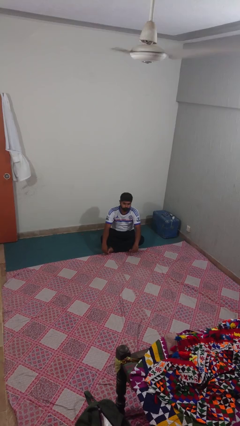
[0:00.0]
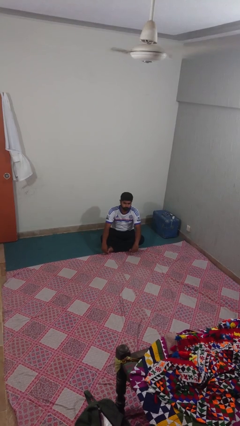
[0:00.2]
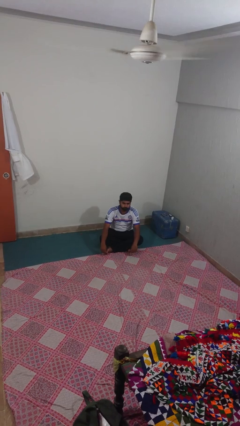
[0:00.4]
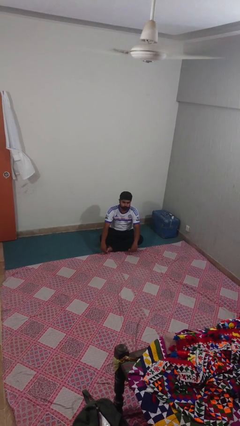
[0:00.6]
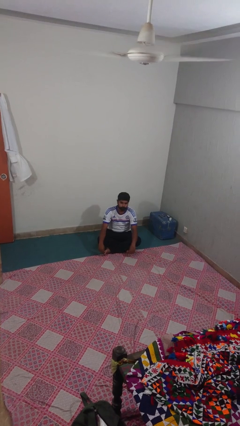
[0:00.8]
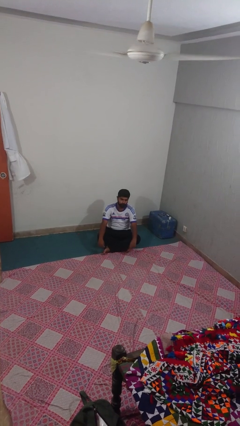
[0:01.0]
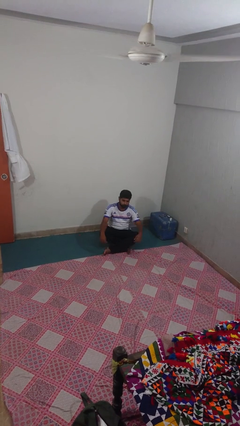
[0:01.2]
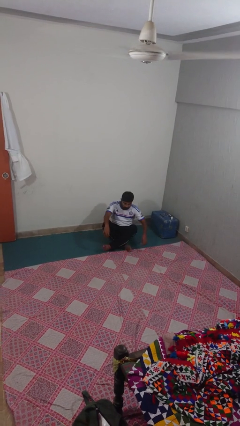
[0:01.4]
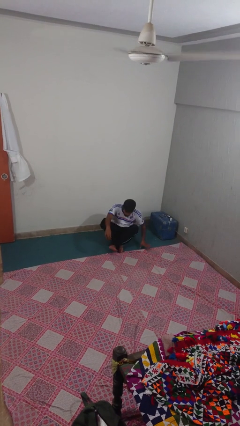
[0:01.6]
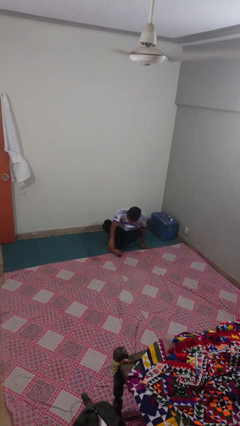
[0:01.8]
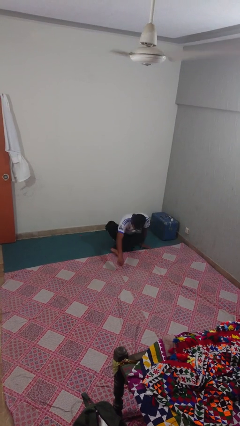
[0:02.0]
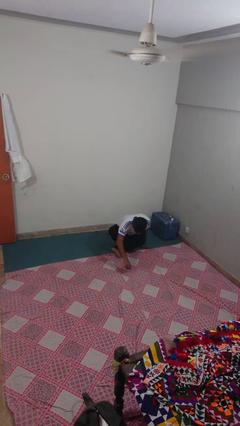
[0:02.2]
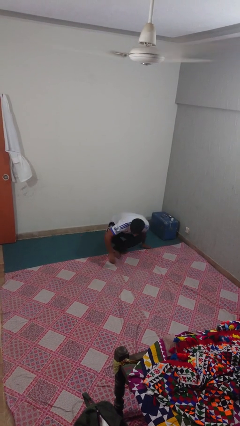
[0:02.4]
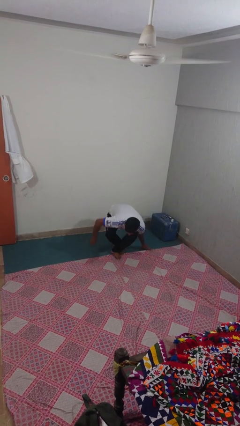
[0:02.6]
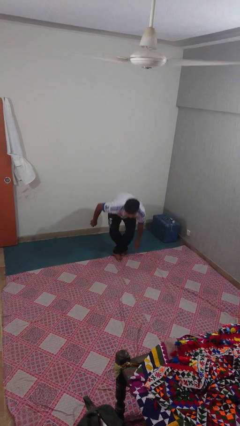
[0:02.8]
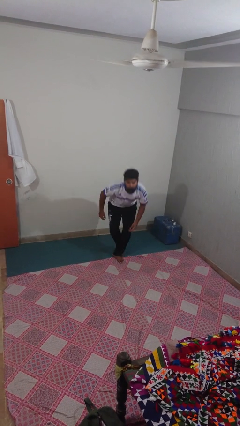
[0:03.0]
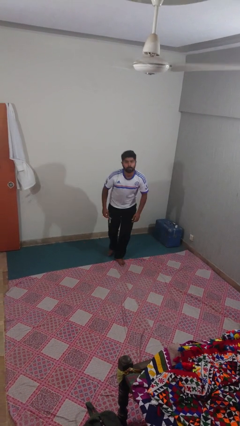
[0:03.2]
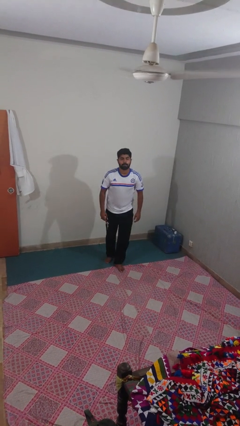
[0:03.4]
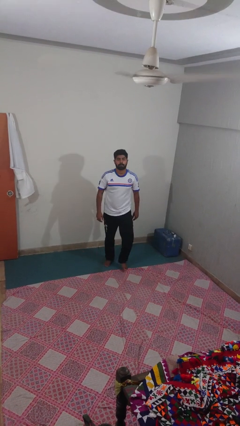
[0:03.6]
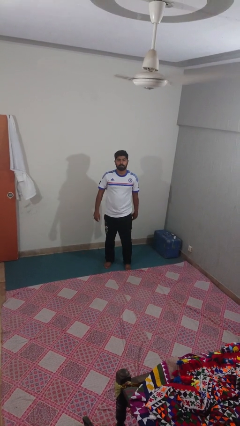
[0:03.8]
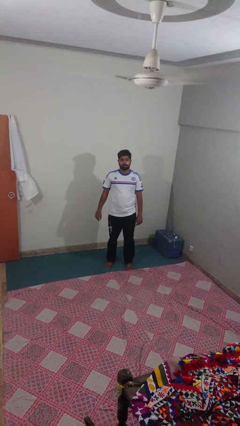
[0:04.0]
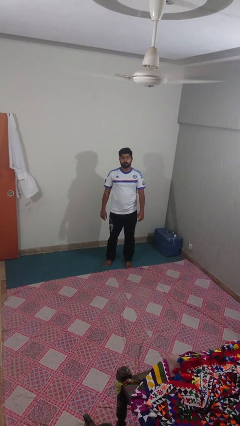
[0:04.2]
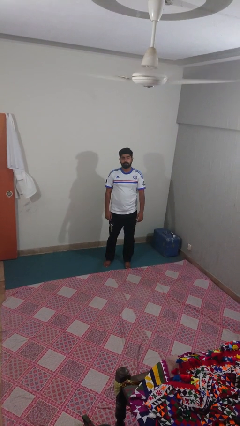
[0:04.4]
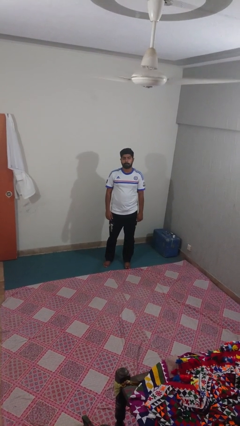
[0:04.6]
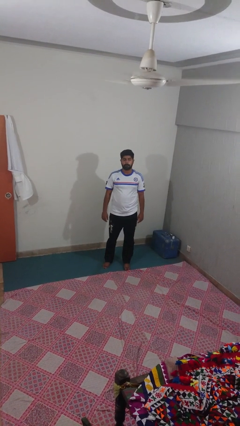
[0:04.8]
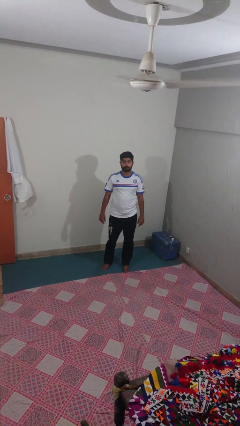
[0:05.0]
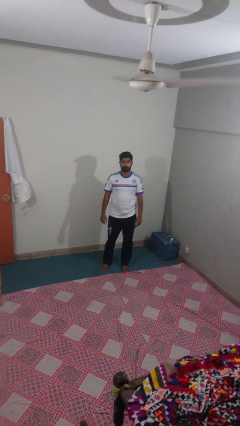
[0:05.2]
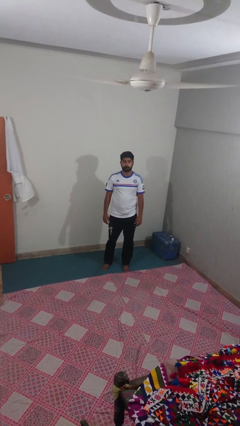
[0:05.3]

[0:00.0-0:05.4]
person stands up from floor

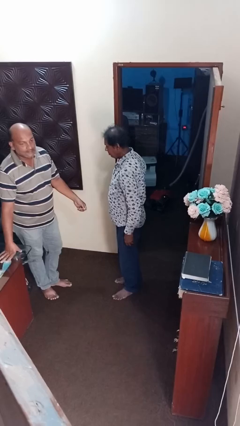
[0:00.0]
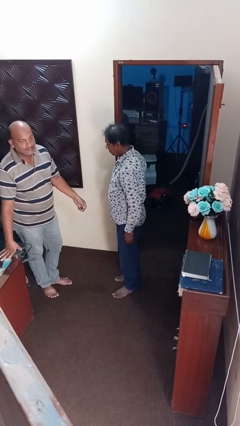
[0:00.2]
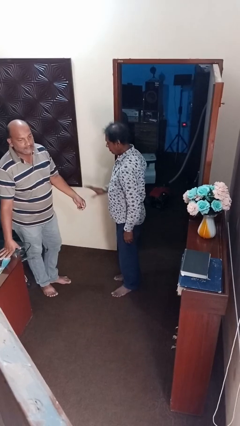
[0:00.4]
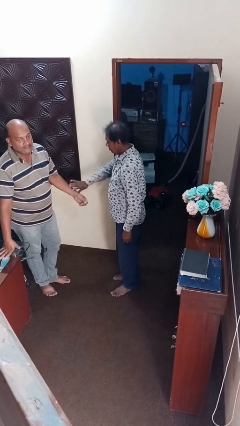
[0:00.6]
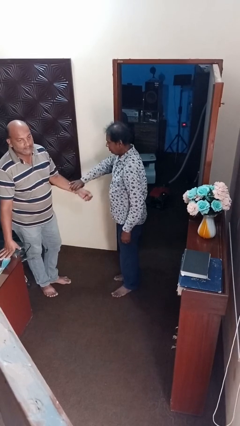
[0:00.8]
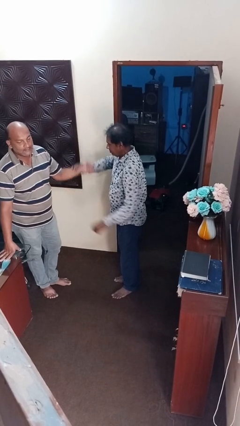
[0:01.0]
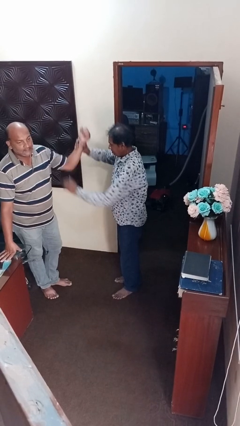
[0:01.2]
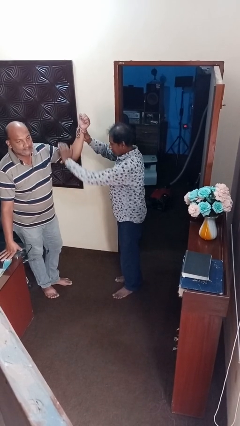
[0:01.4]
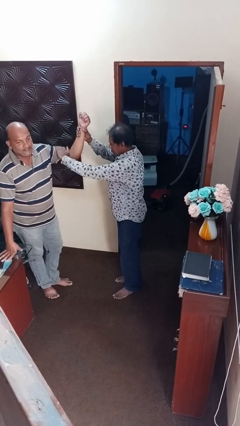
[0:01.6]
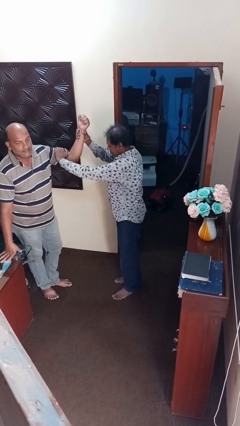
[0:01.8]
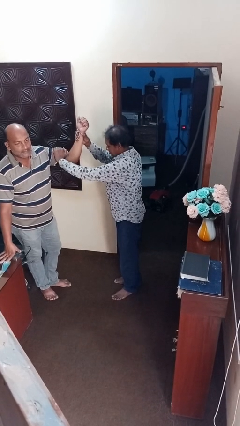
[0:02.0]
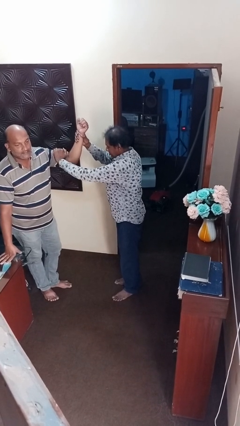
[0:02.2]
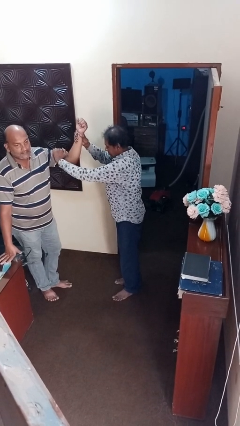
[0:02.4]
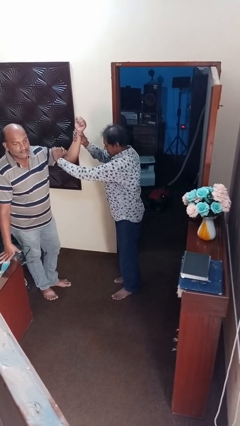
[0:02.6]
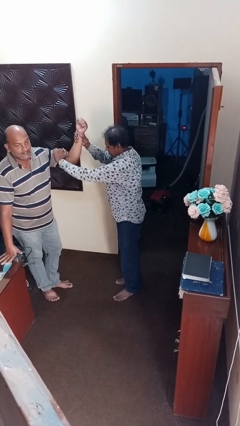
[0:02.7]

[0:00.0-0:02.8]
person grabs person by bicep

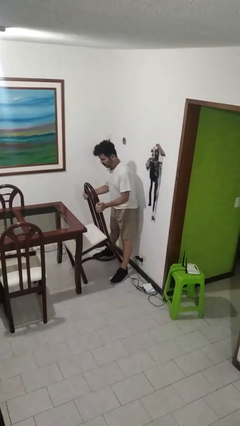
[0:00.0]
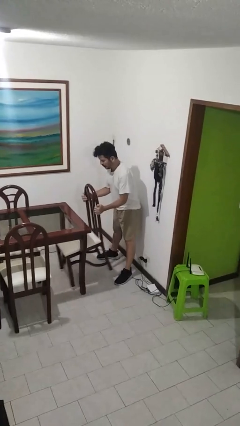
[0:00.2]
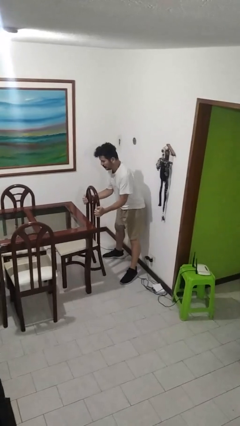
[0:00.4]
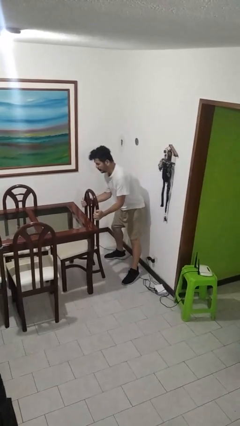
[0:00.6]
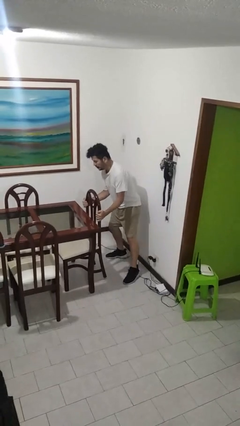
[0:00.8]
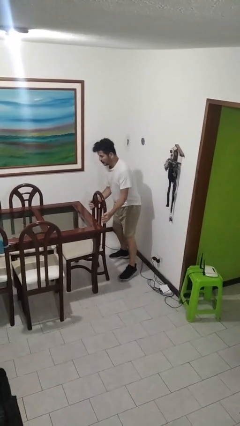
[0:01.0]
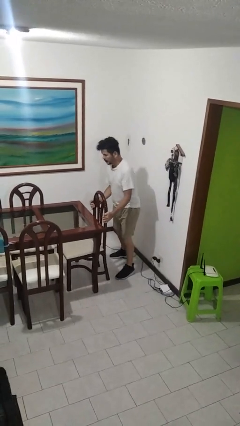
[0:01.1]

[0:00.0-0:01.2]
person pushes in chair

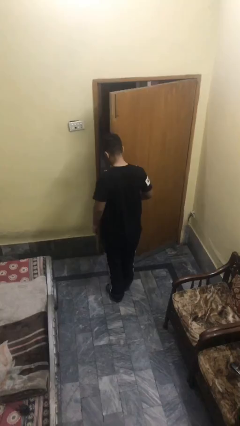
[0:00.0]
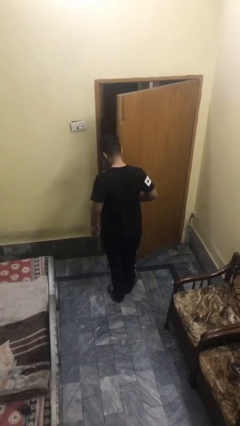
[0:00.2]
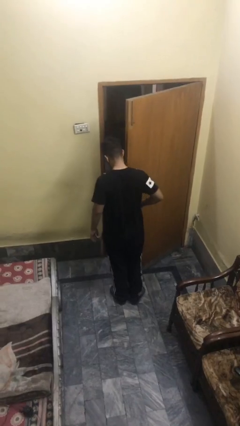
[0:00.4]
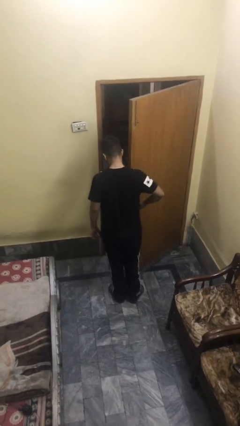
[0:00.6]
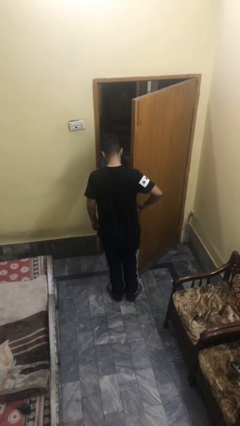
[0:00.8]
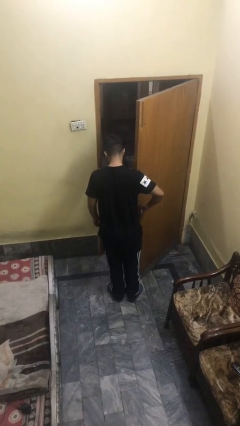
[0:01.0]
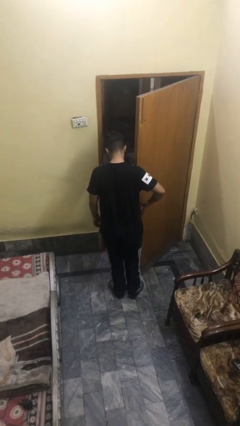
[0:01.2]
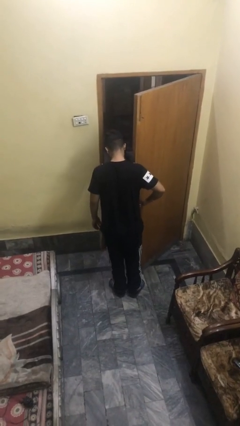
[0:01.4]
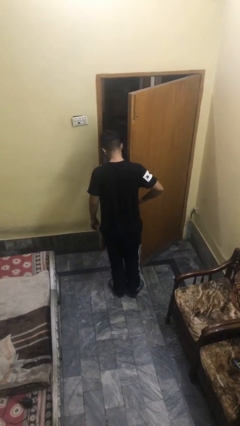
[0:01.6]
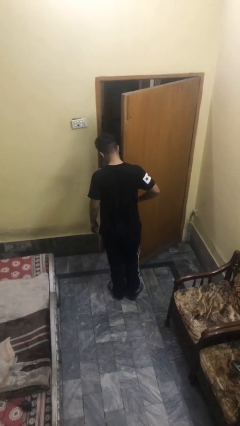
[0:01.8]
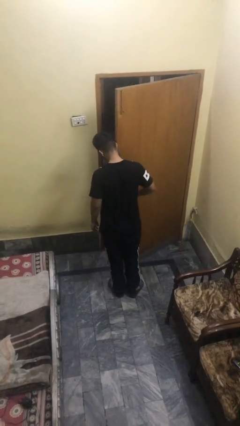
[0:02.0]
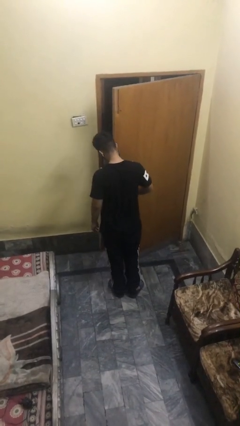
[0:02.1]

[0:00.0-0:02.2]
person opens facility door

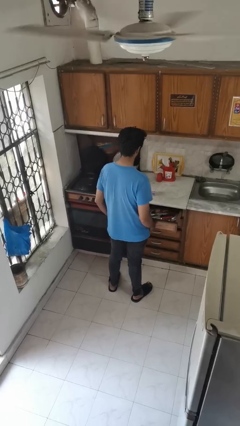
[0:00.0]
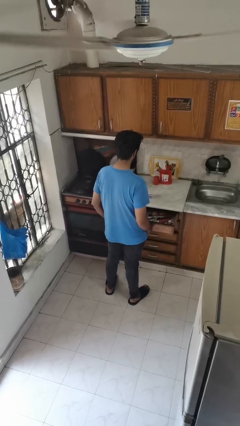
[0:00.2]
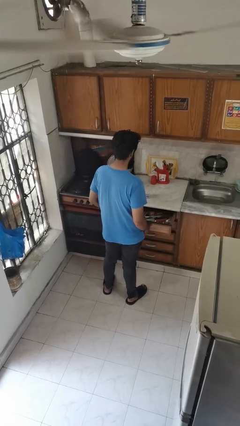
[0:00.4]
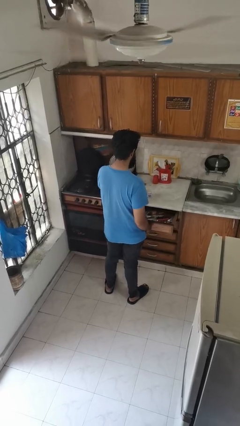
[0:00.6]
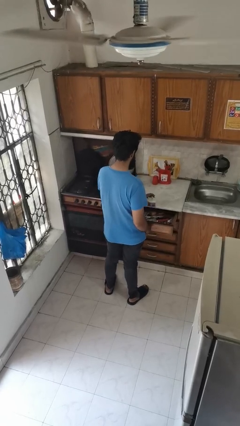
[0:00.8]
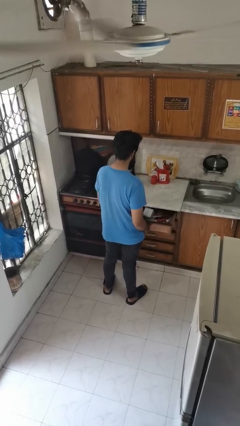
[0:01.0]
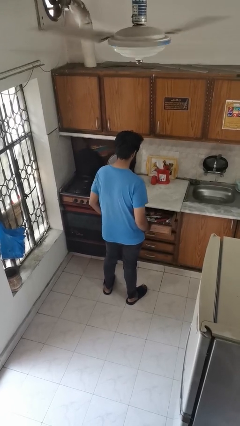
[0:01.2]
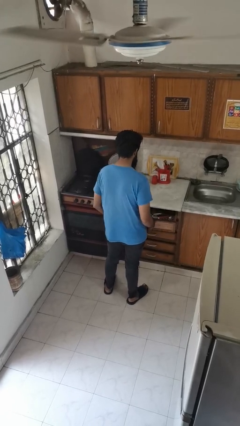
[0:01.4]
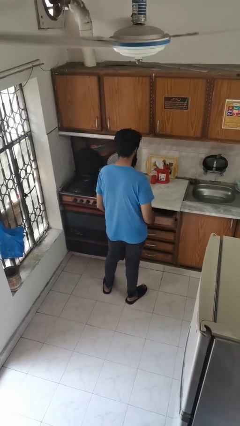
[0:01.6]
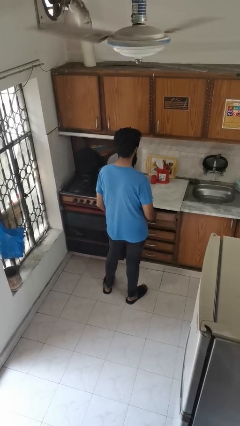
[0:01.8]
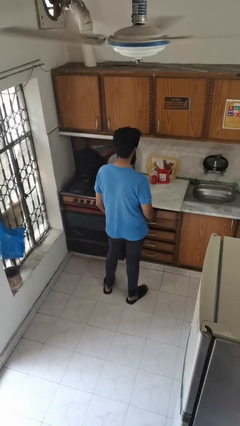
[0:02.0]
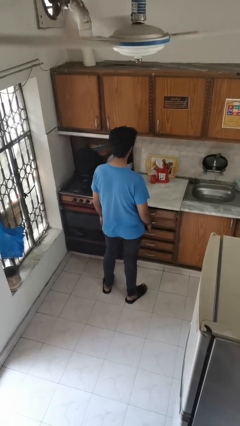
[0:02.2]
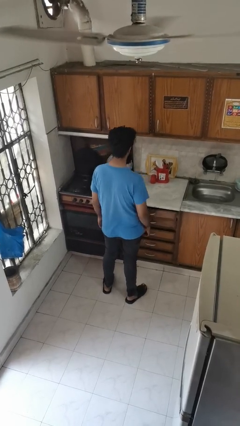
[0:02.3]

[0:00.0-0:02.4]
person puts object into kitchen drawer

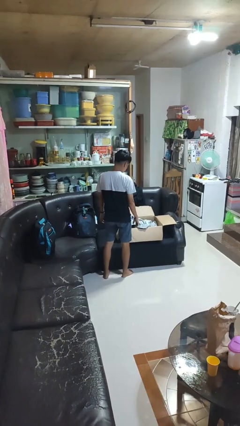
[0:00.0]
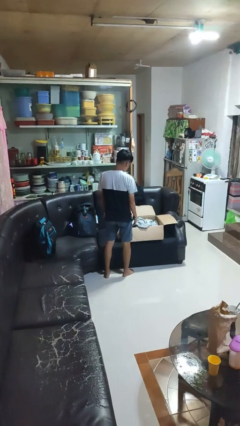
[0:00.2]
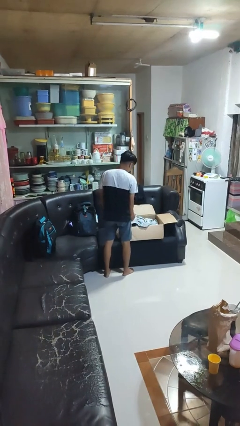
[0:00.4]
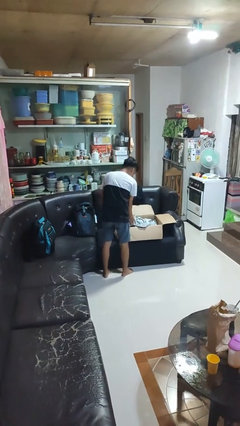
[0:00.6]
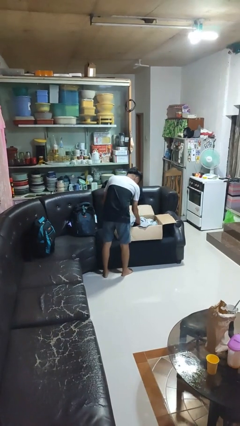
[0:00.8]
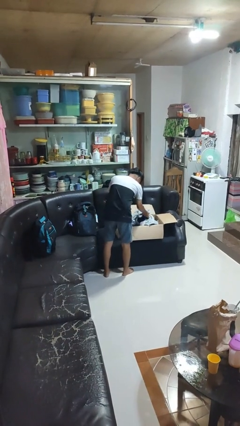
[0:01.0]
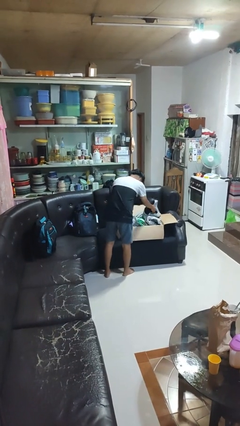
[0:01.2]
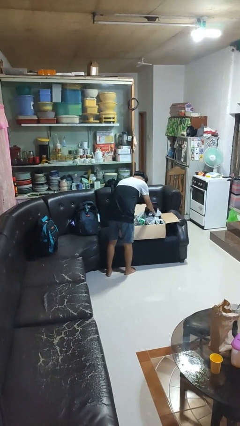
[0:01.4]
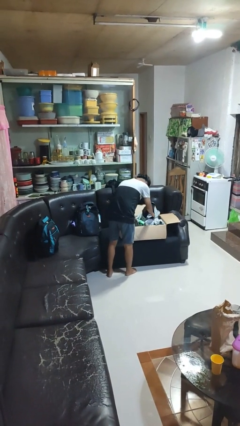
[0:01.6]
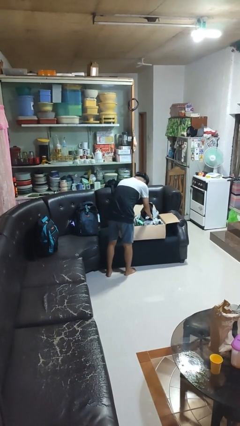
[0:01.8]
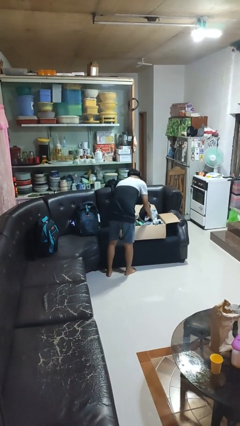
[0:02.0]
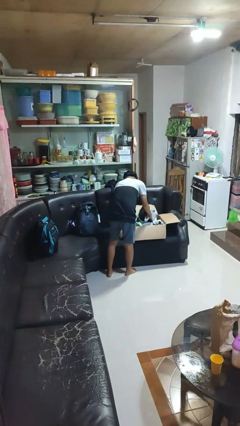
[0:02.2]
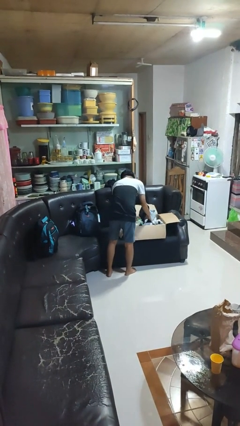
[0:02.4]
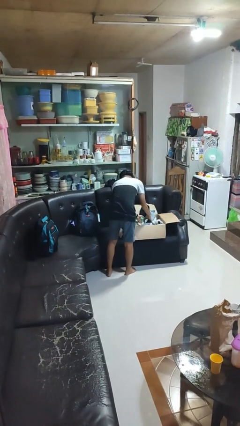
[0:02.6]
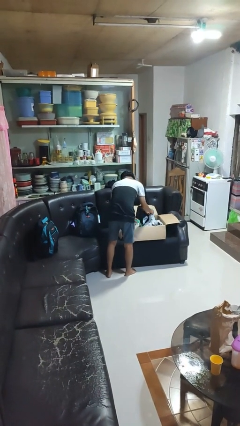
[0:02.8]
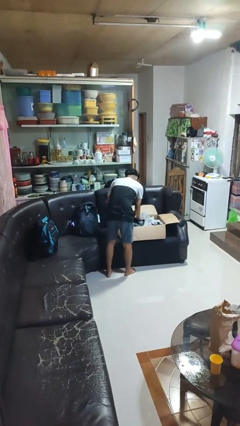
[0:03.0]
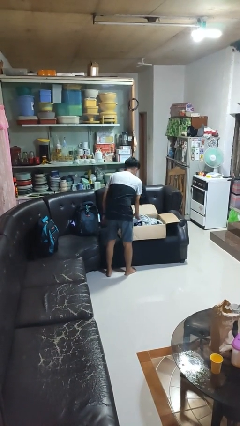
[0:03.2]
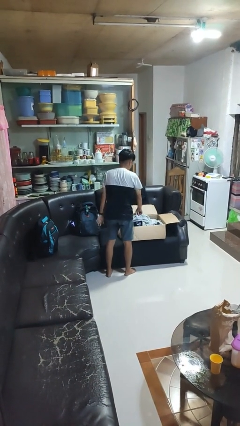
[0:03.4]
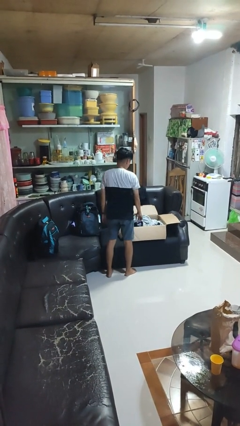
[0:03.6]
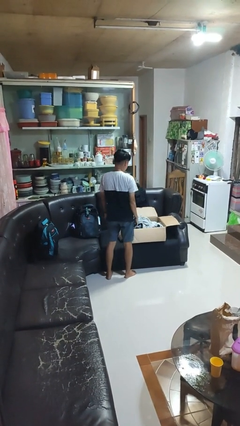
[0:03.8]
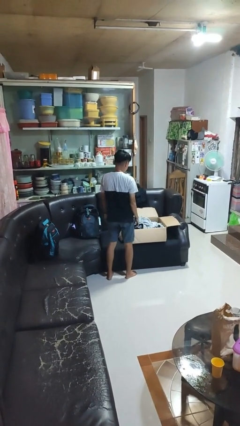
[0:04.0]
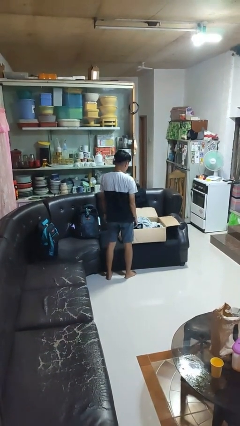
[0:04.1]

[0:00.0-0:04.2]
person searches in box
